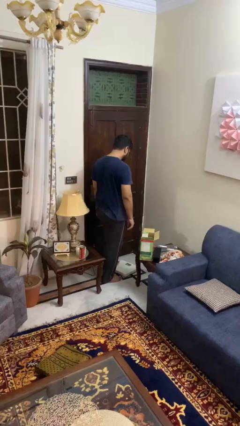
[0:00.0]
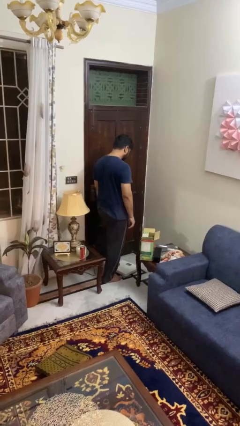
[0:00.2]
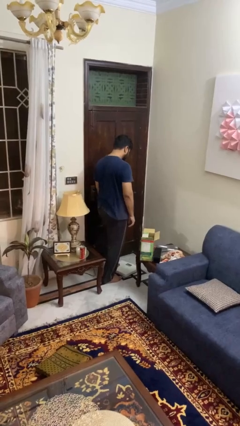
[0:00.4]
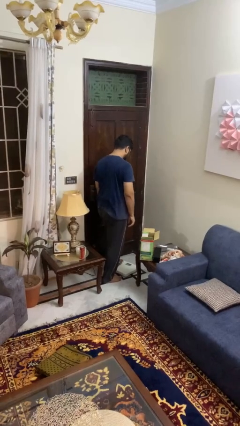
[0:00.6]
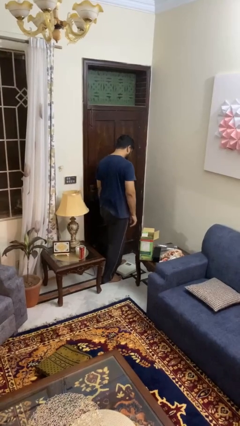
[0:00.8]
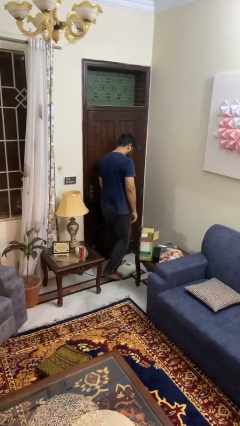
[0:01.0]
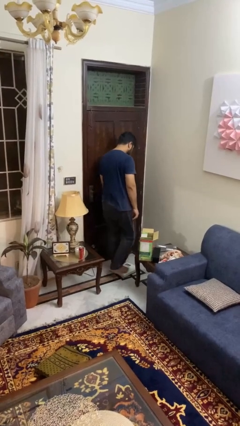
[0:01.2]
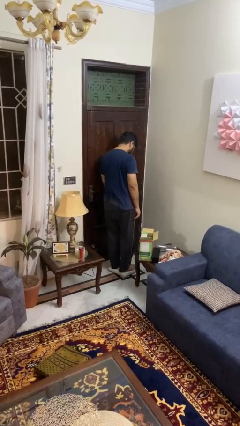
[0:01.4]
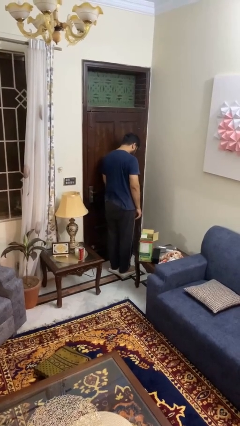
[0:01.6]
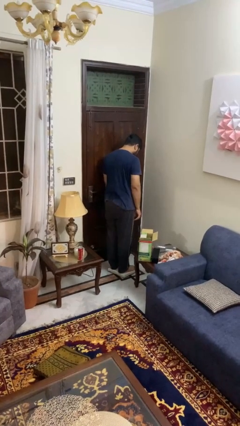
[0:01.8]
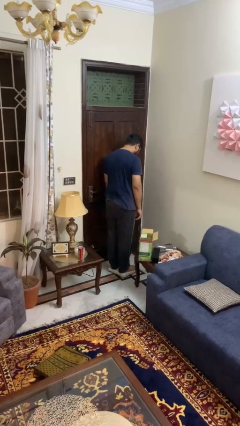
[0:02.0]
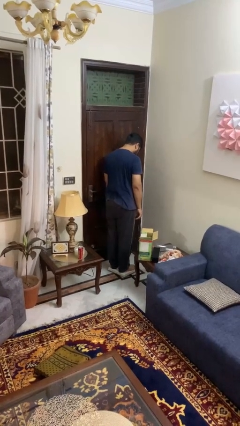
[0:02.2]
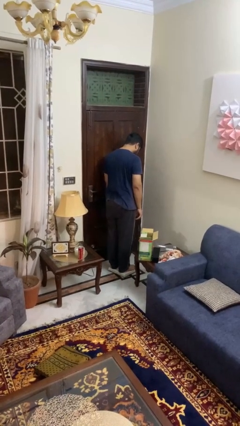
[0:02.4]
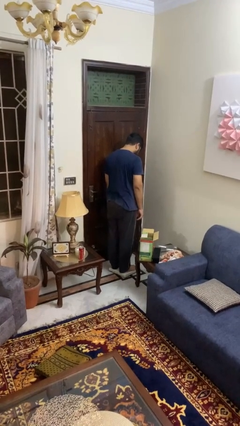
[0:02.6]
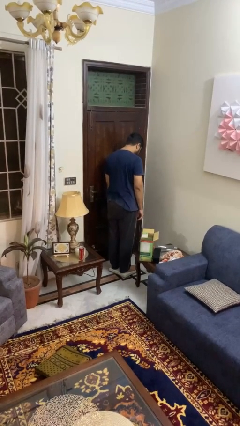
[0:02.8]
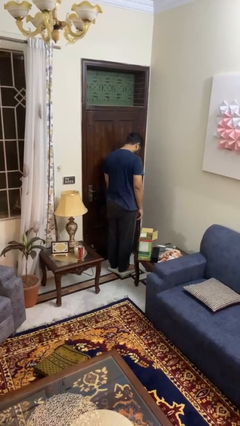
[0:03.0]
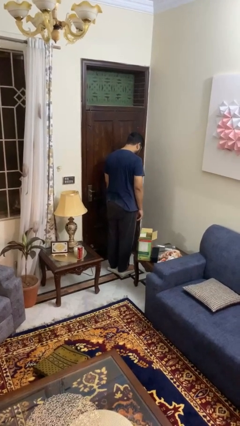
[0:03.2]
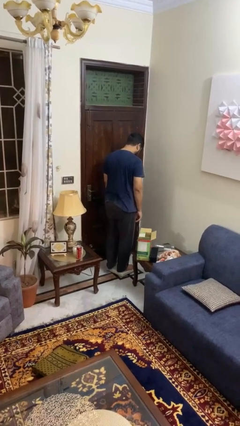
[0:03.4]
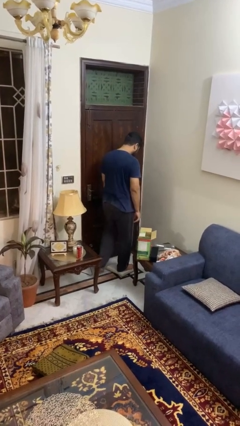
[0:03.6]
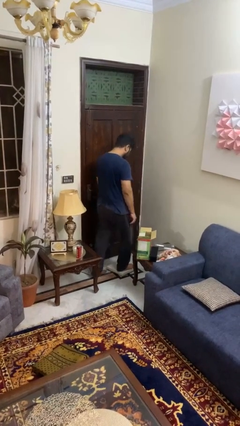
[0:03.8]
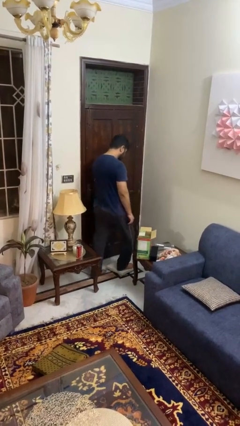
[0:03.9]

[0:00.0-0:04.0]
person uses bodyweight scale

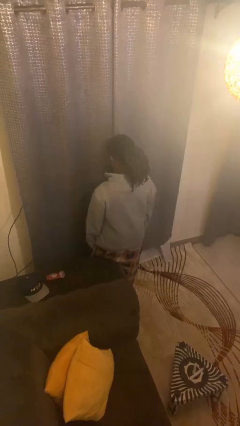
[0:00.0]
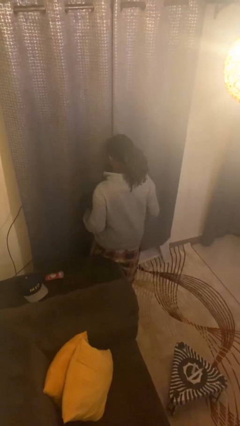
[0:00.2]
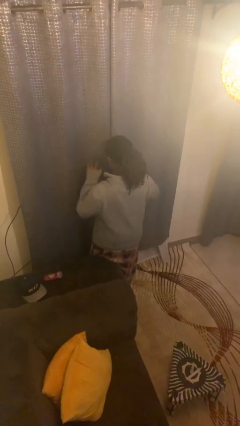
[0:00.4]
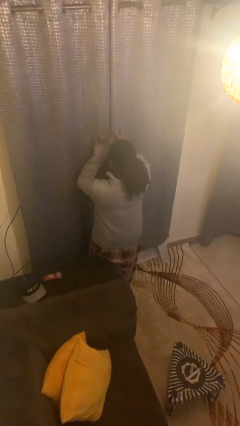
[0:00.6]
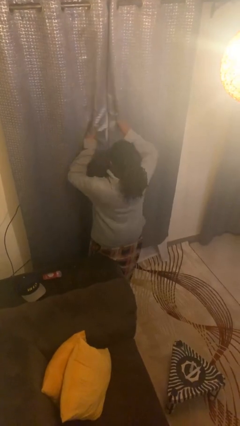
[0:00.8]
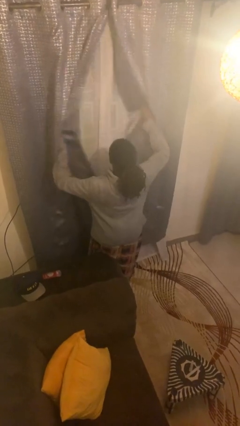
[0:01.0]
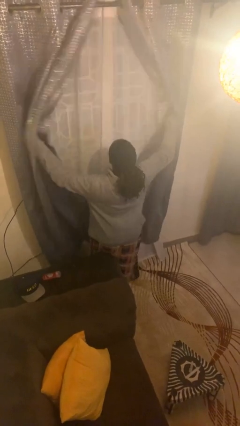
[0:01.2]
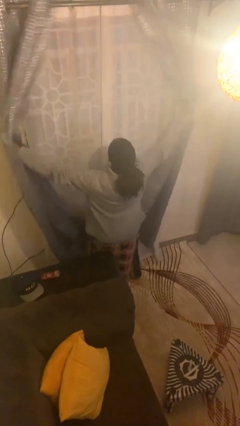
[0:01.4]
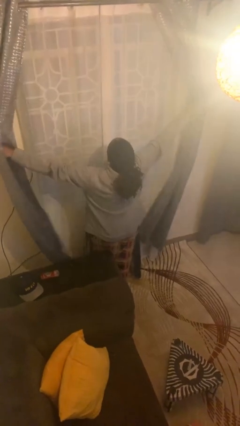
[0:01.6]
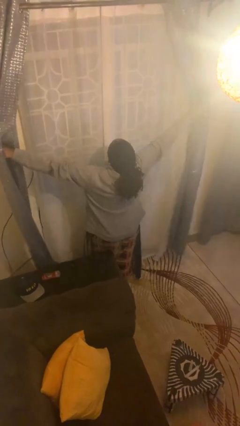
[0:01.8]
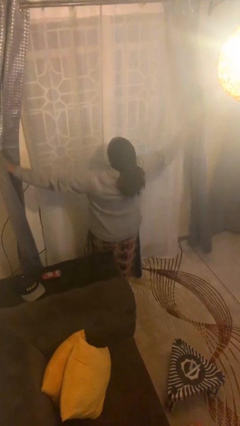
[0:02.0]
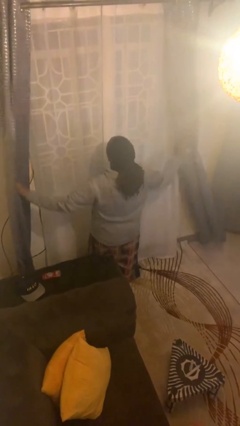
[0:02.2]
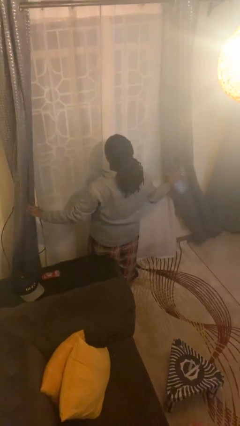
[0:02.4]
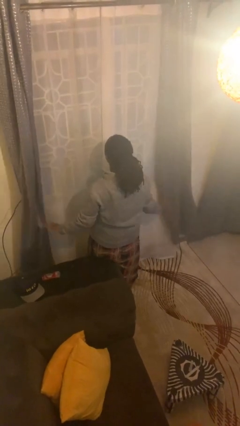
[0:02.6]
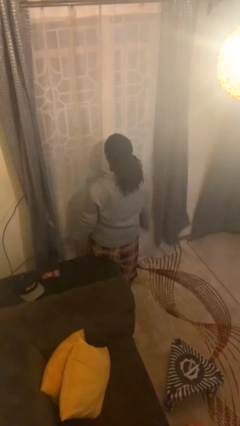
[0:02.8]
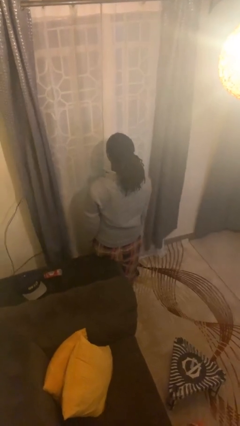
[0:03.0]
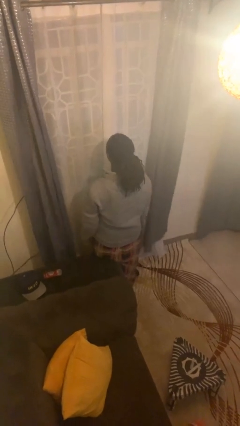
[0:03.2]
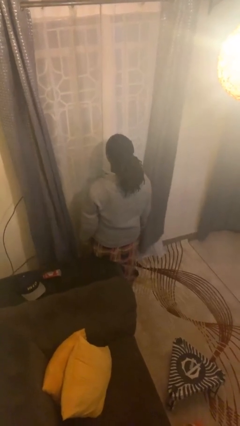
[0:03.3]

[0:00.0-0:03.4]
person opens curtains

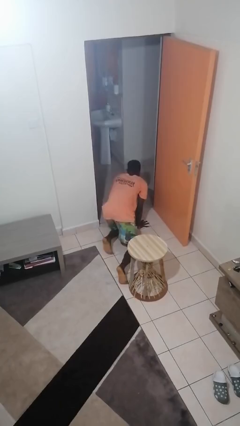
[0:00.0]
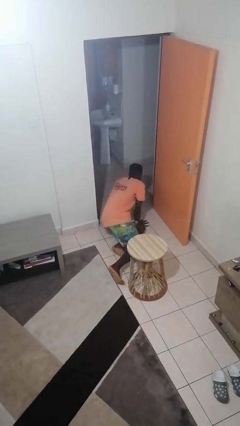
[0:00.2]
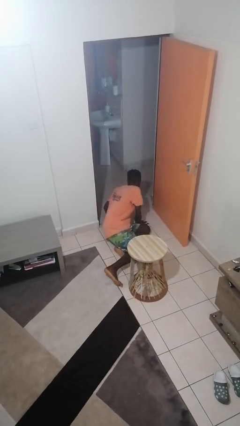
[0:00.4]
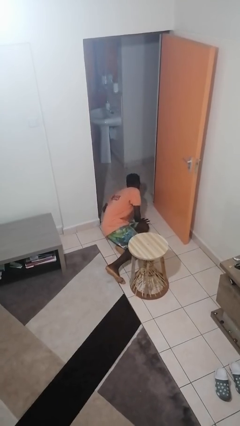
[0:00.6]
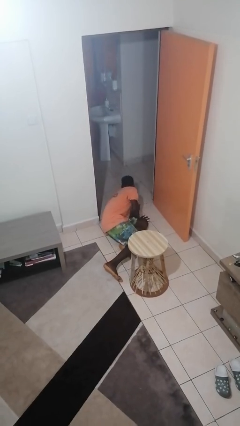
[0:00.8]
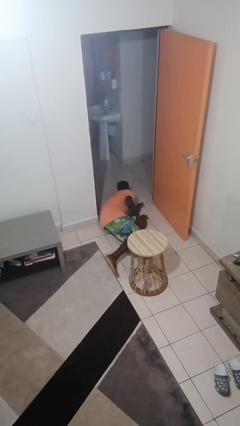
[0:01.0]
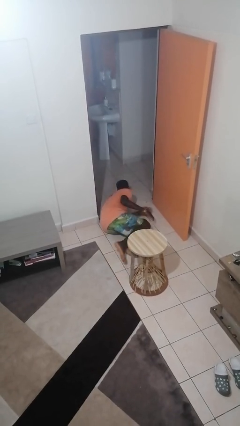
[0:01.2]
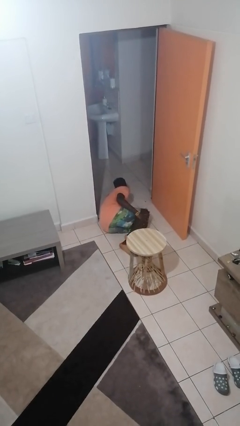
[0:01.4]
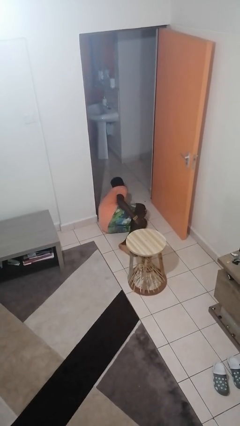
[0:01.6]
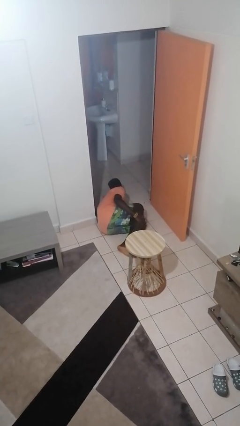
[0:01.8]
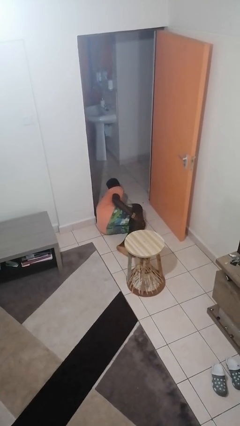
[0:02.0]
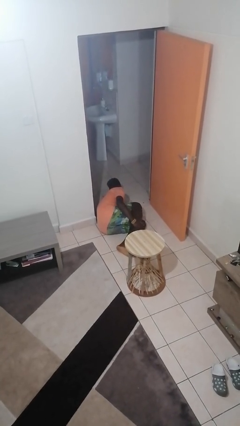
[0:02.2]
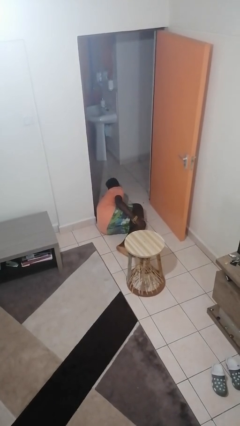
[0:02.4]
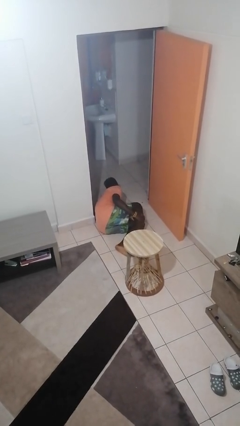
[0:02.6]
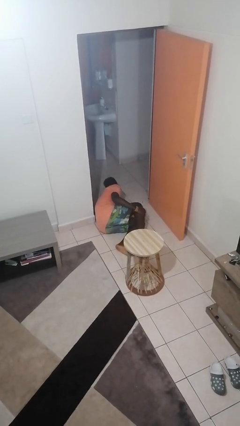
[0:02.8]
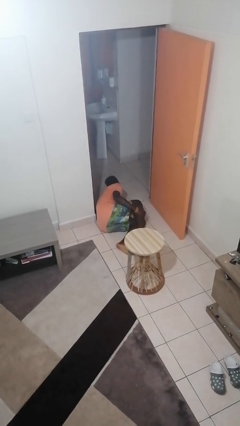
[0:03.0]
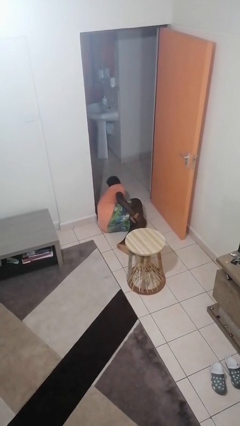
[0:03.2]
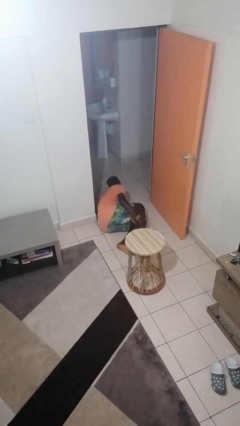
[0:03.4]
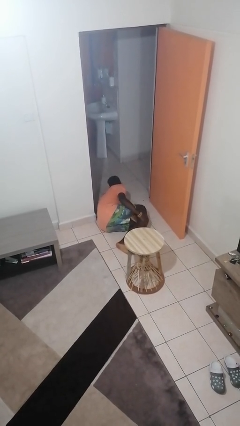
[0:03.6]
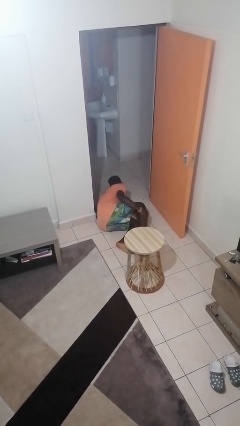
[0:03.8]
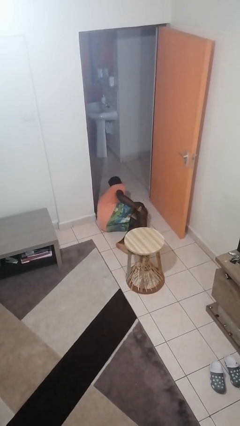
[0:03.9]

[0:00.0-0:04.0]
person lies down on floor

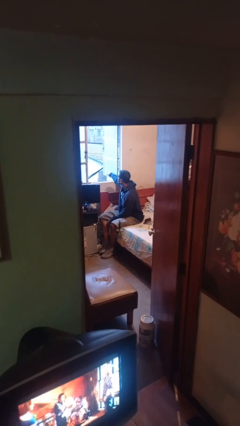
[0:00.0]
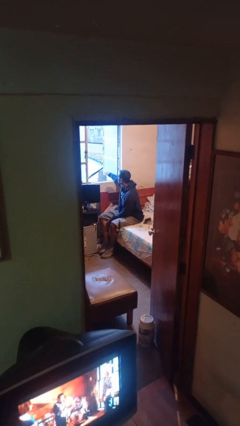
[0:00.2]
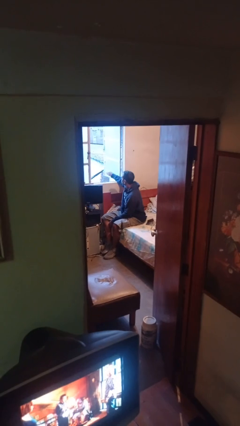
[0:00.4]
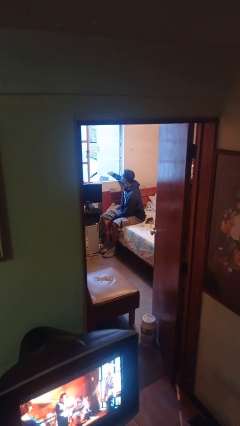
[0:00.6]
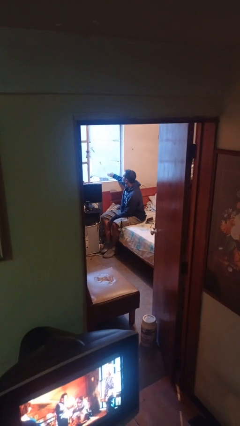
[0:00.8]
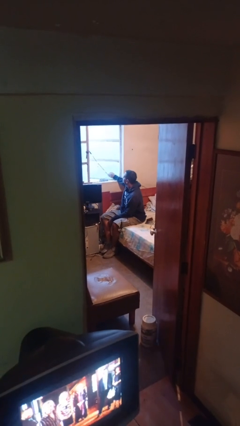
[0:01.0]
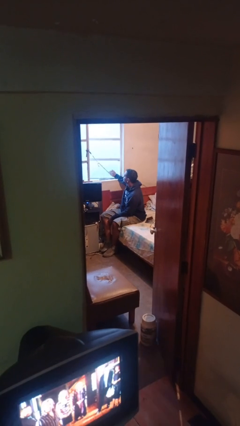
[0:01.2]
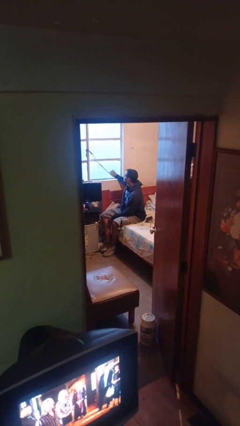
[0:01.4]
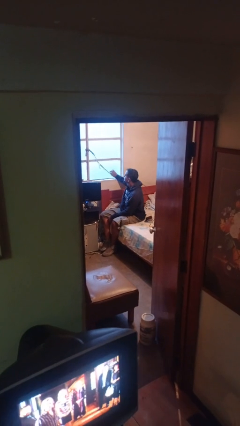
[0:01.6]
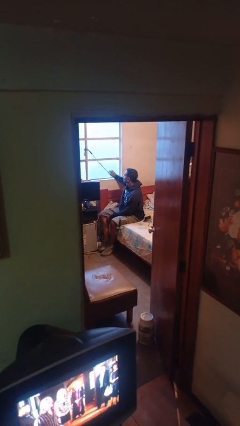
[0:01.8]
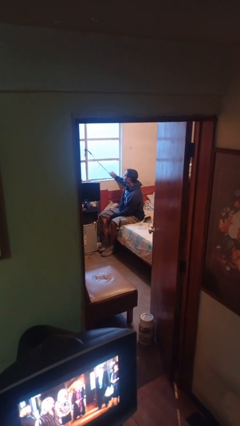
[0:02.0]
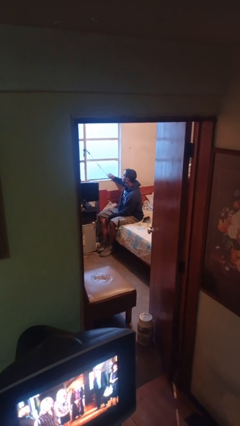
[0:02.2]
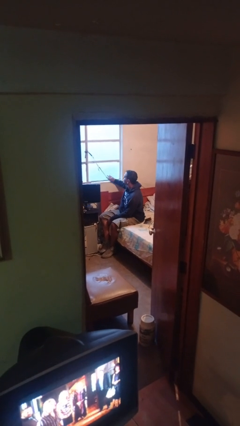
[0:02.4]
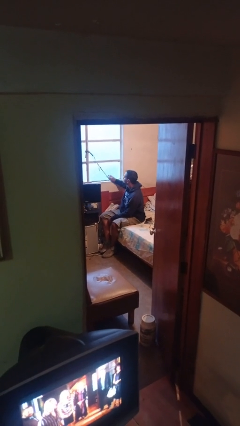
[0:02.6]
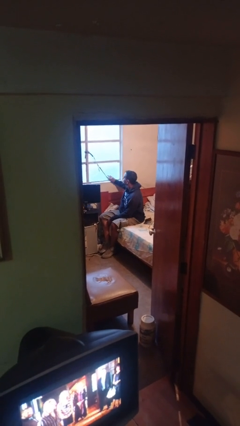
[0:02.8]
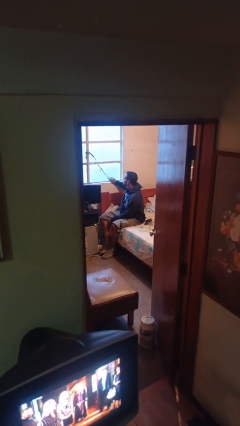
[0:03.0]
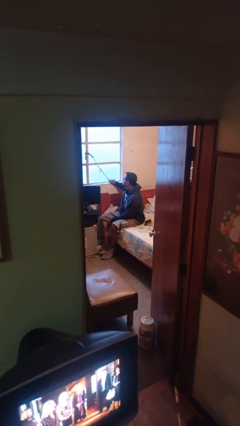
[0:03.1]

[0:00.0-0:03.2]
person closes home window

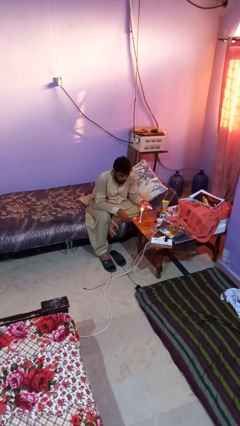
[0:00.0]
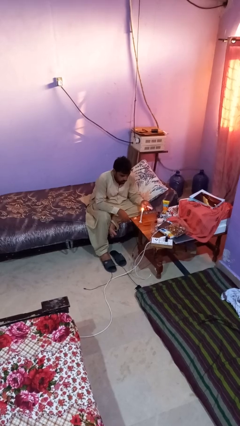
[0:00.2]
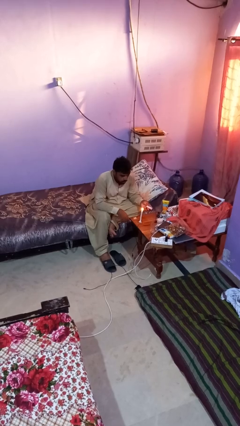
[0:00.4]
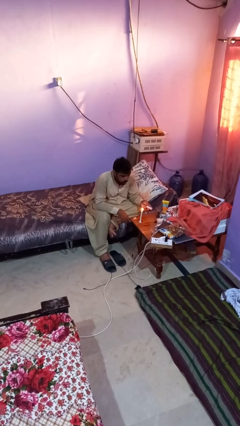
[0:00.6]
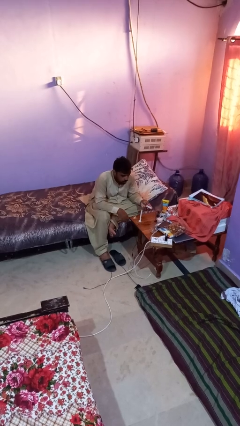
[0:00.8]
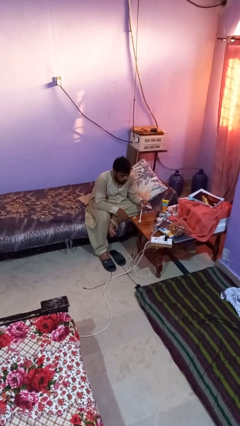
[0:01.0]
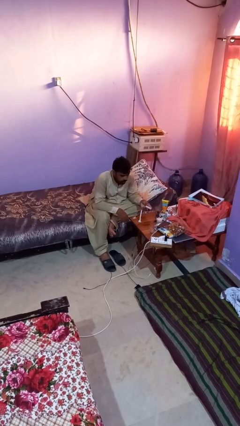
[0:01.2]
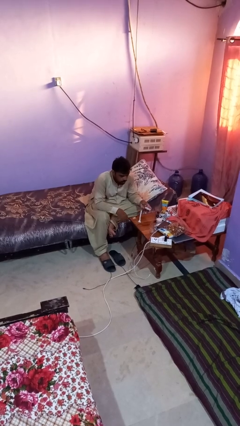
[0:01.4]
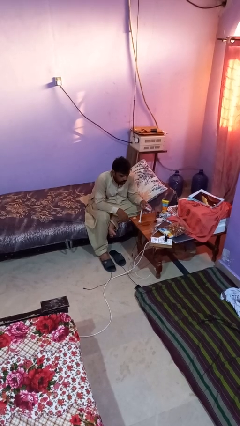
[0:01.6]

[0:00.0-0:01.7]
person extinguishes candle

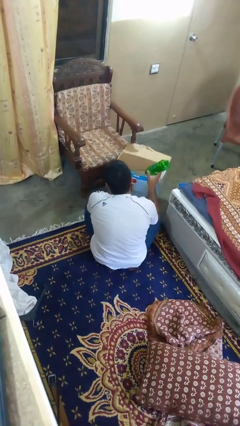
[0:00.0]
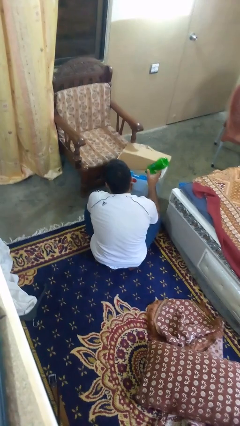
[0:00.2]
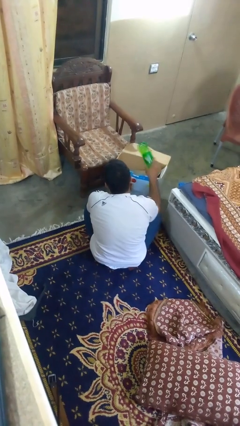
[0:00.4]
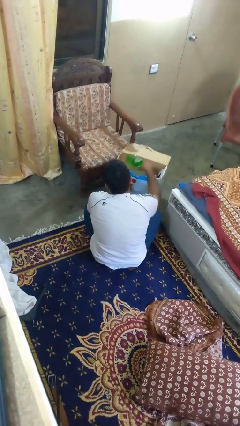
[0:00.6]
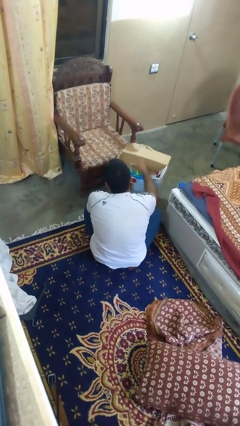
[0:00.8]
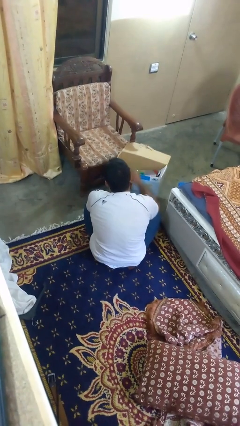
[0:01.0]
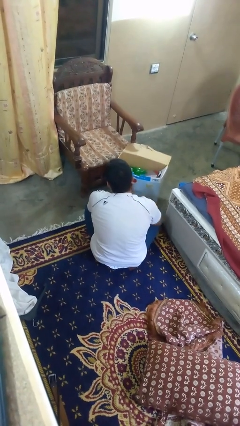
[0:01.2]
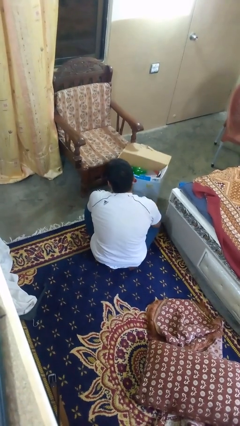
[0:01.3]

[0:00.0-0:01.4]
person puts object into box
